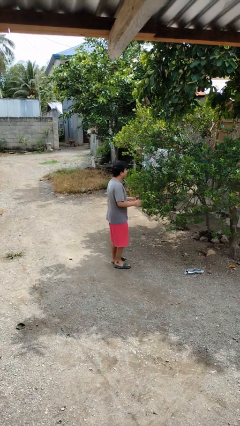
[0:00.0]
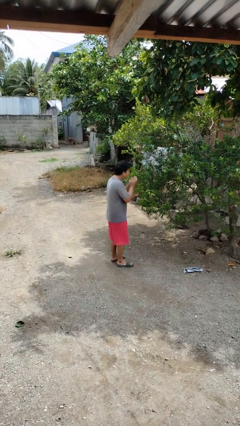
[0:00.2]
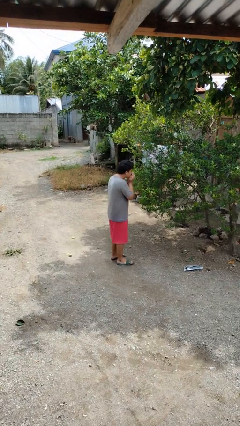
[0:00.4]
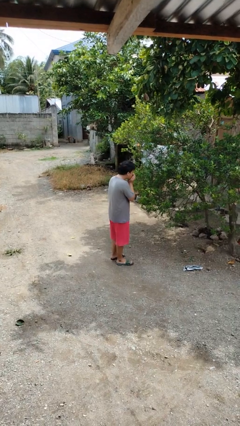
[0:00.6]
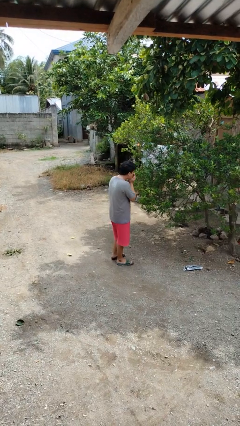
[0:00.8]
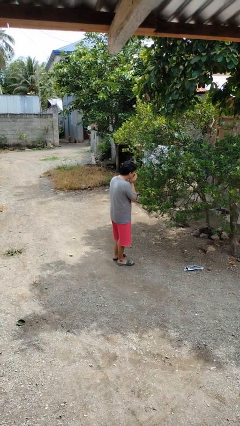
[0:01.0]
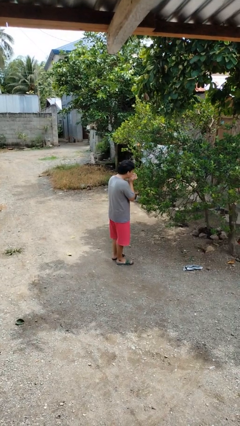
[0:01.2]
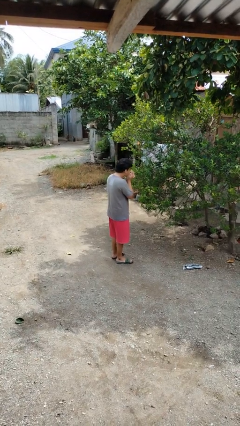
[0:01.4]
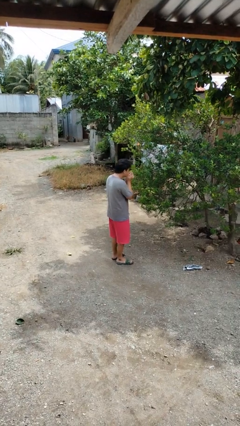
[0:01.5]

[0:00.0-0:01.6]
person blows into hands

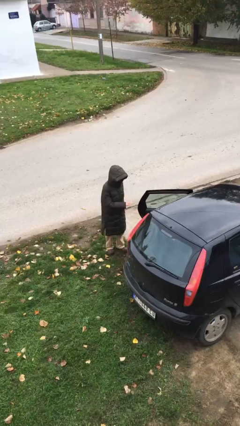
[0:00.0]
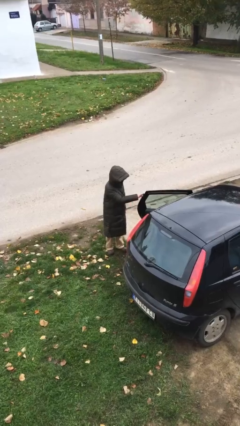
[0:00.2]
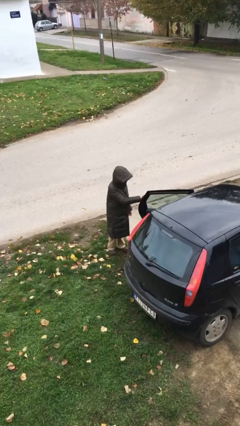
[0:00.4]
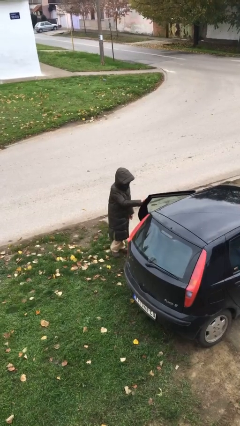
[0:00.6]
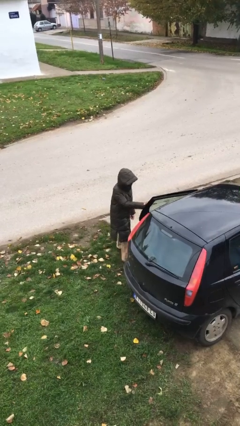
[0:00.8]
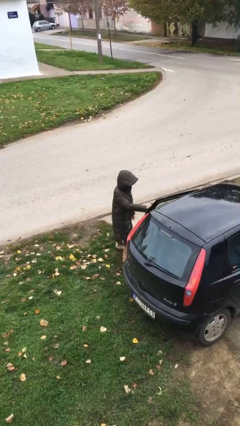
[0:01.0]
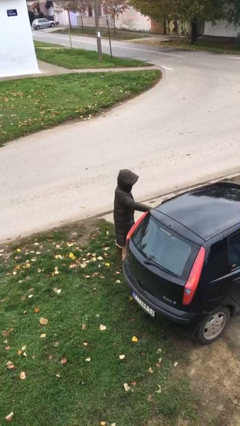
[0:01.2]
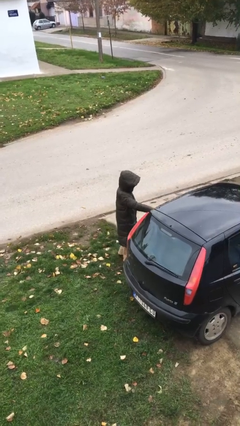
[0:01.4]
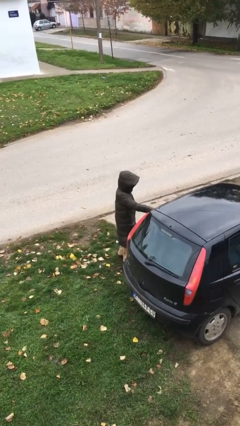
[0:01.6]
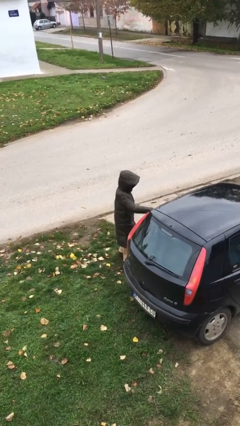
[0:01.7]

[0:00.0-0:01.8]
person closes car door

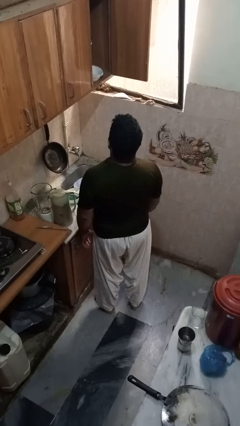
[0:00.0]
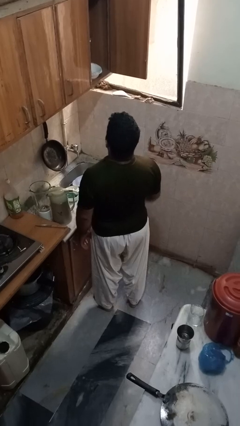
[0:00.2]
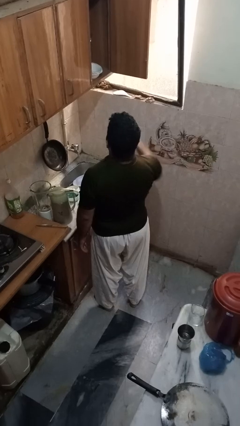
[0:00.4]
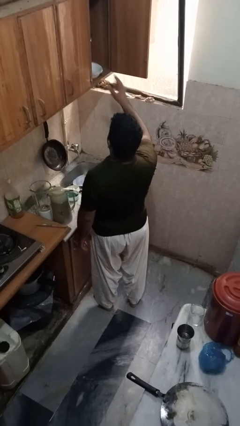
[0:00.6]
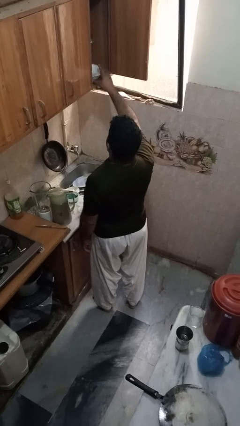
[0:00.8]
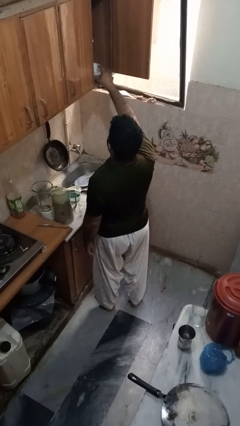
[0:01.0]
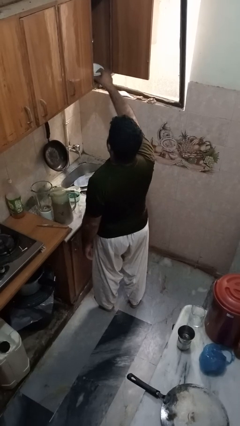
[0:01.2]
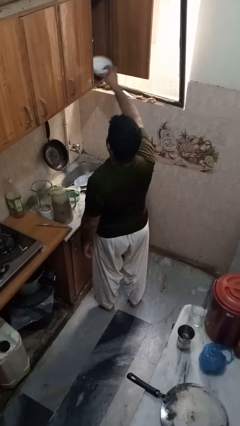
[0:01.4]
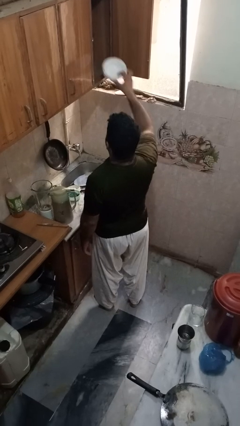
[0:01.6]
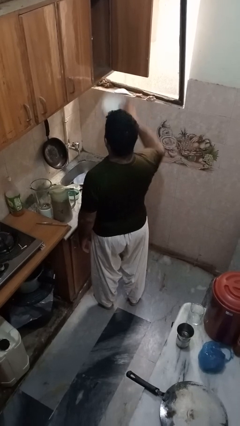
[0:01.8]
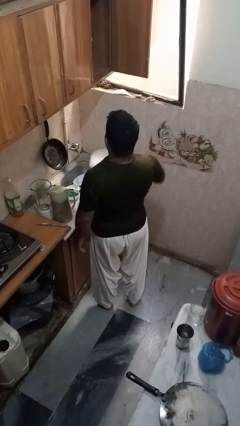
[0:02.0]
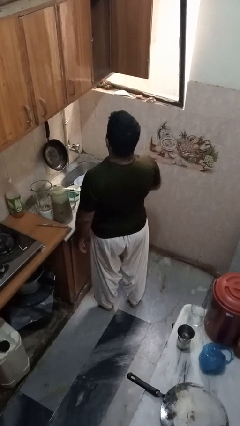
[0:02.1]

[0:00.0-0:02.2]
person takes object from cabinet

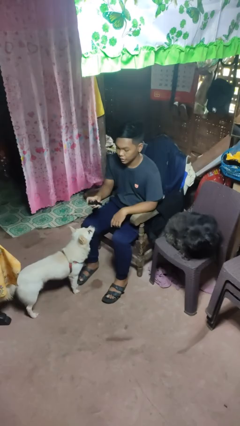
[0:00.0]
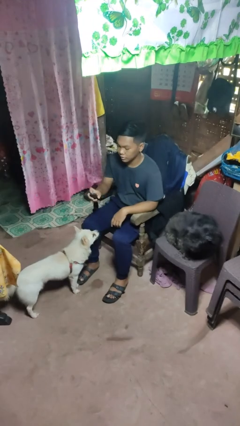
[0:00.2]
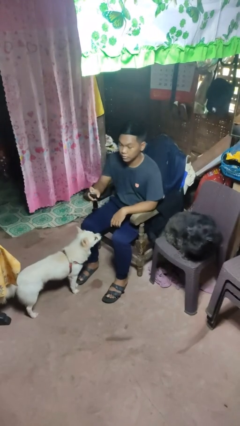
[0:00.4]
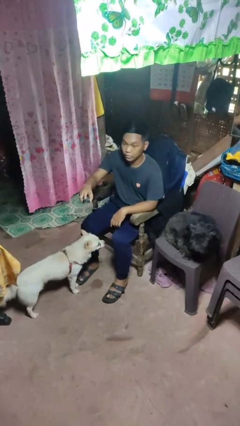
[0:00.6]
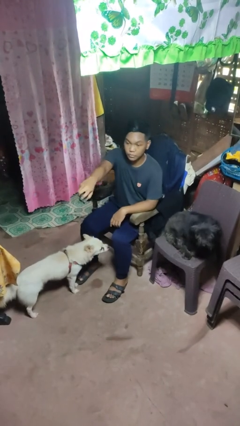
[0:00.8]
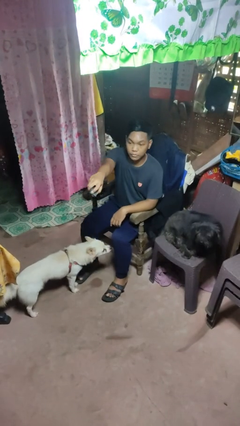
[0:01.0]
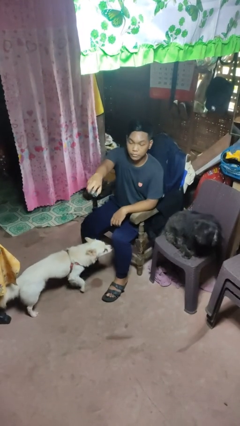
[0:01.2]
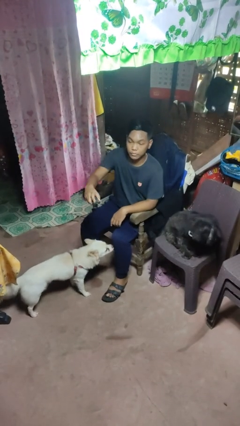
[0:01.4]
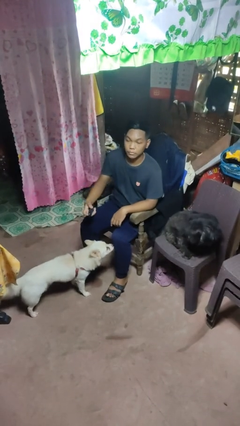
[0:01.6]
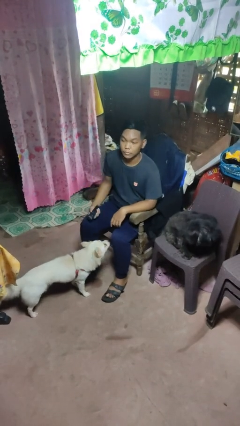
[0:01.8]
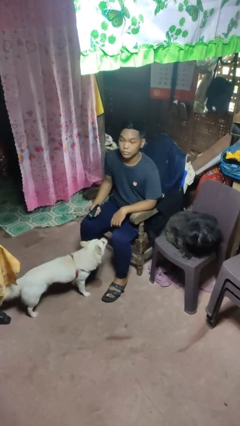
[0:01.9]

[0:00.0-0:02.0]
person uses television remote

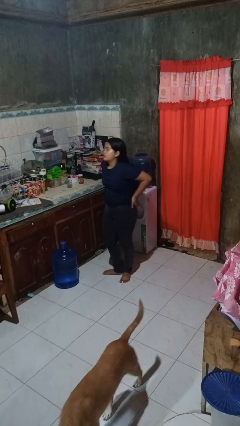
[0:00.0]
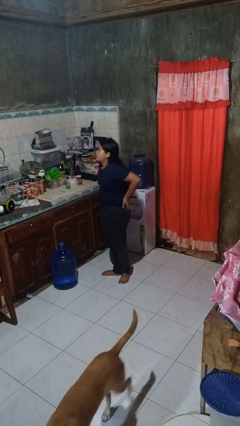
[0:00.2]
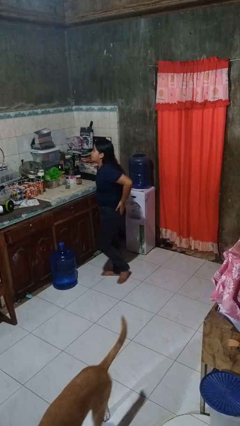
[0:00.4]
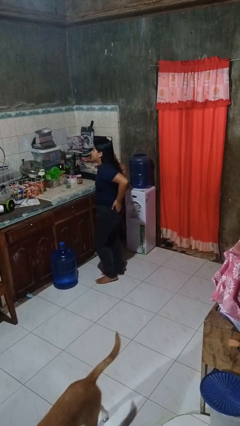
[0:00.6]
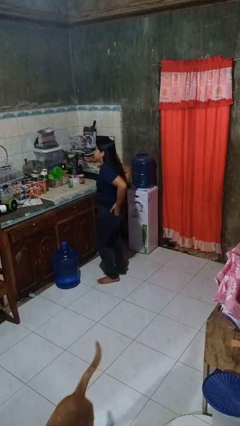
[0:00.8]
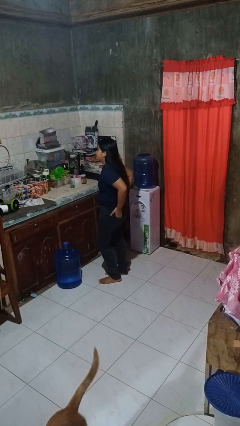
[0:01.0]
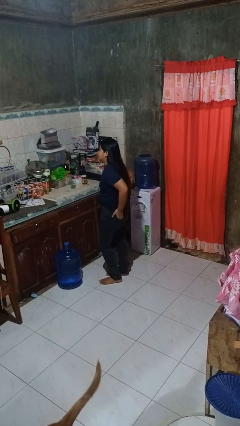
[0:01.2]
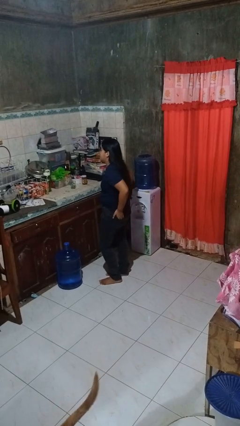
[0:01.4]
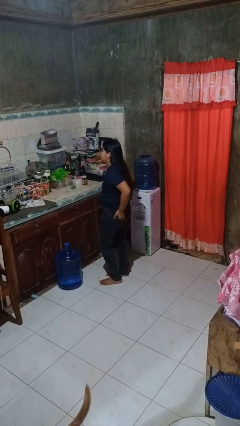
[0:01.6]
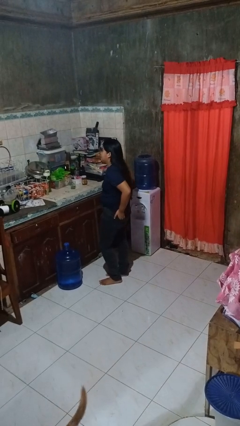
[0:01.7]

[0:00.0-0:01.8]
person puts hands in back pockets

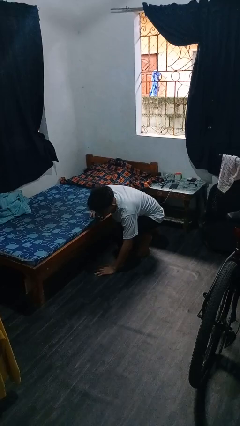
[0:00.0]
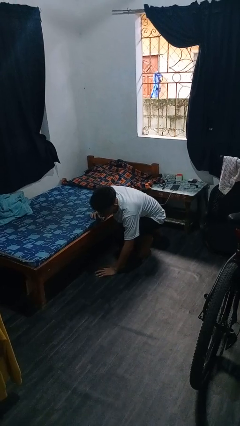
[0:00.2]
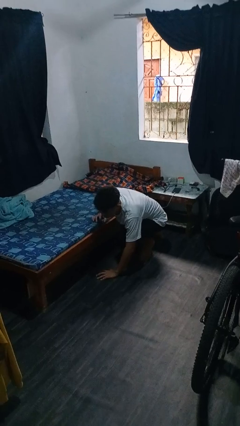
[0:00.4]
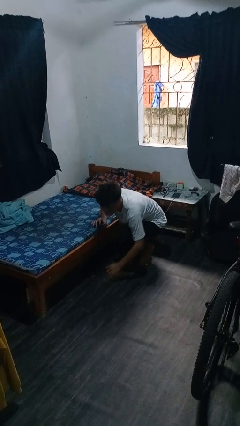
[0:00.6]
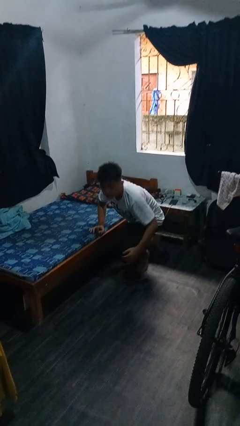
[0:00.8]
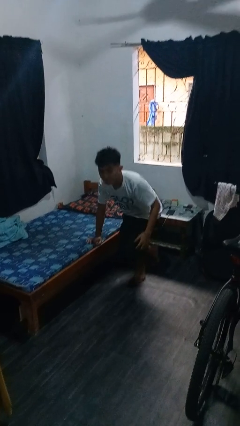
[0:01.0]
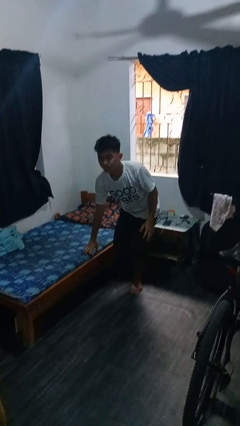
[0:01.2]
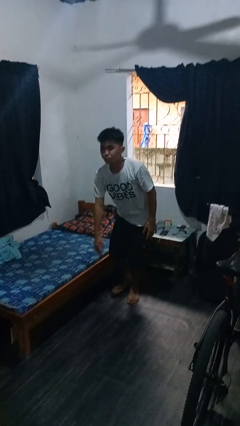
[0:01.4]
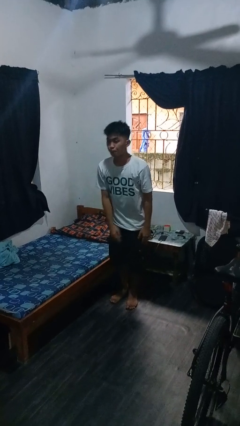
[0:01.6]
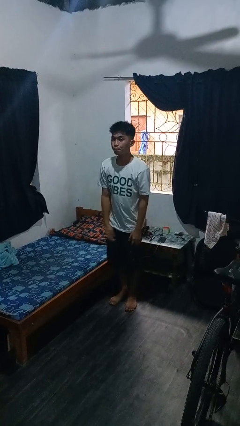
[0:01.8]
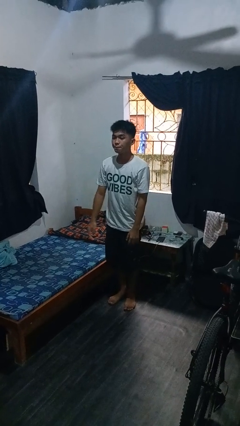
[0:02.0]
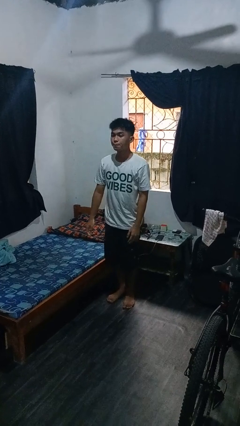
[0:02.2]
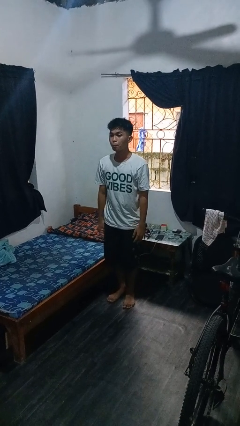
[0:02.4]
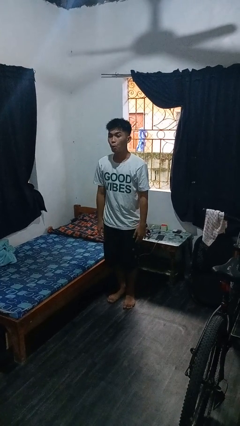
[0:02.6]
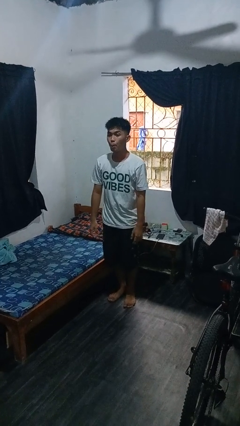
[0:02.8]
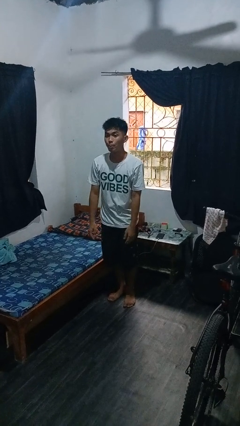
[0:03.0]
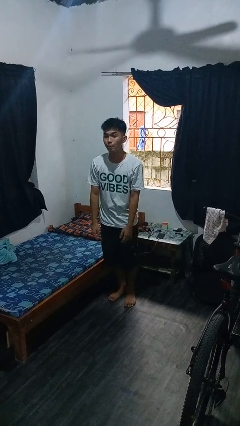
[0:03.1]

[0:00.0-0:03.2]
person stands up from floor

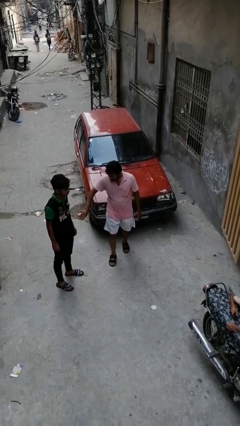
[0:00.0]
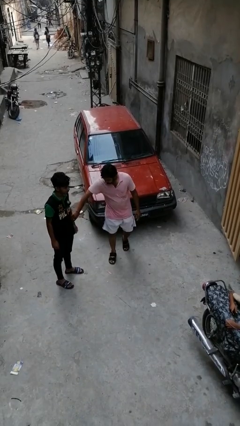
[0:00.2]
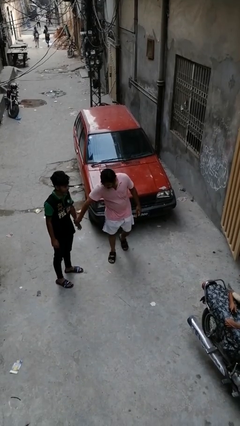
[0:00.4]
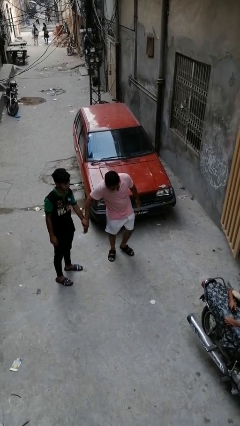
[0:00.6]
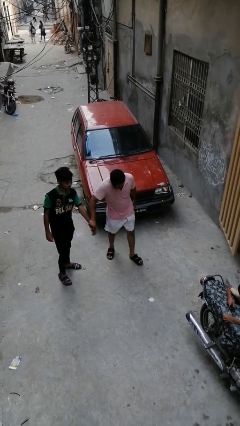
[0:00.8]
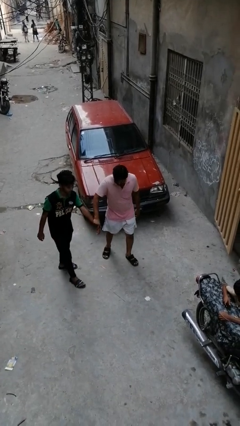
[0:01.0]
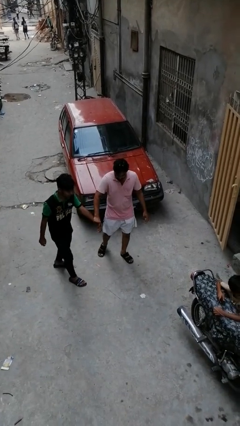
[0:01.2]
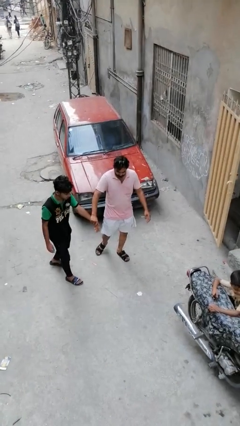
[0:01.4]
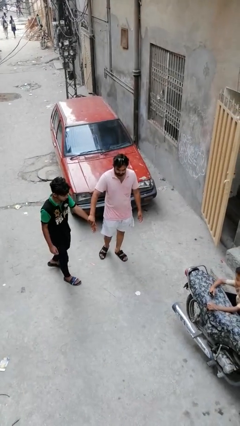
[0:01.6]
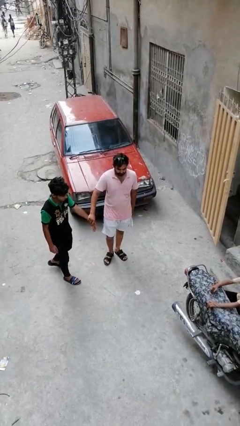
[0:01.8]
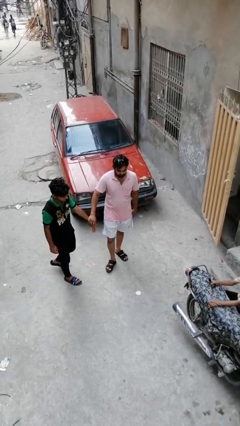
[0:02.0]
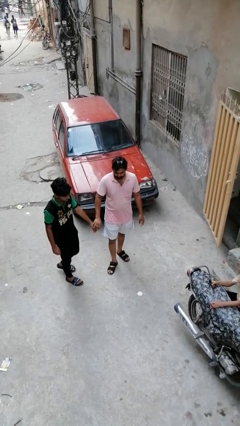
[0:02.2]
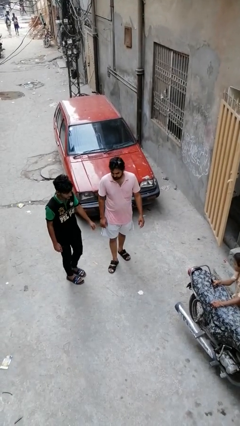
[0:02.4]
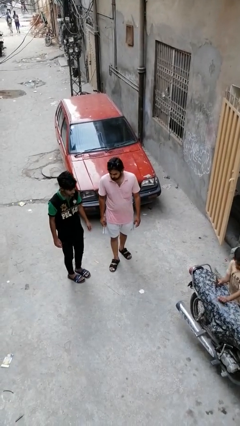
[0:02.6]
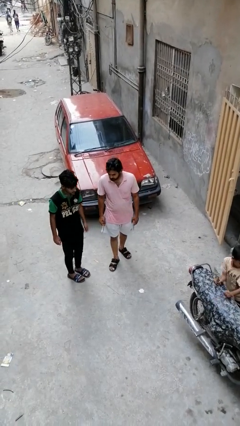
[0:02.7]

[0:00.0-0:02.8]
person grabs person by forearm

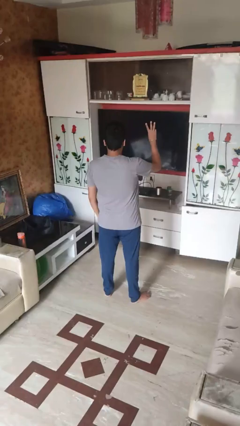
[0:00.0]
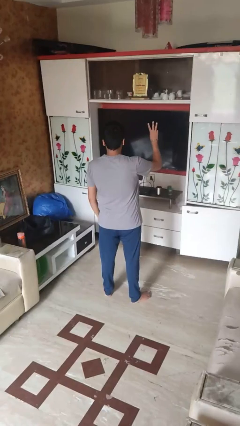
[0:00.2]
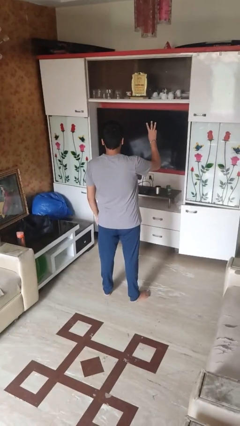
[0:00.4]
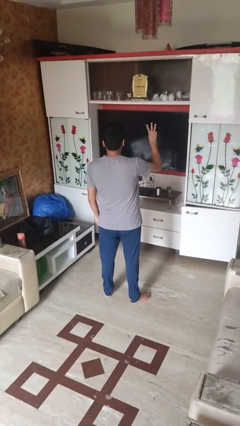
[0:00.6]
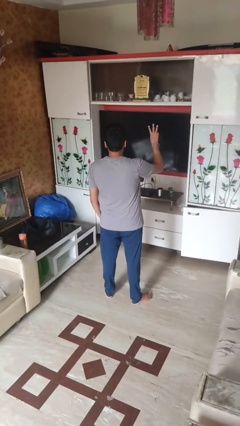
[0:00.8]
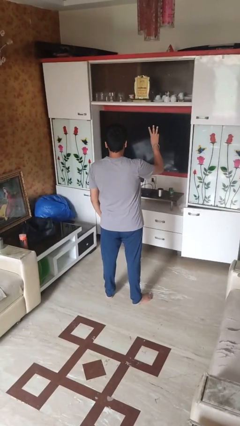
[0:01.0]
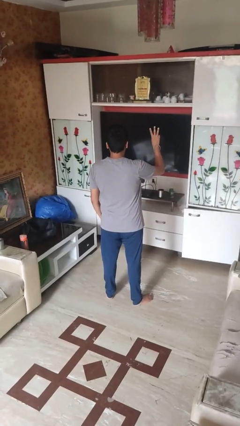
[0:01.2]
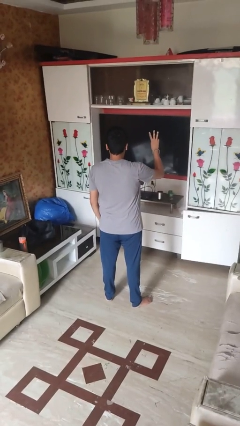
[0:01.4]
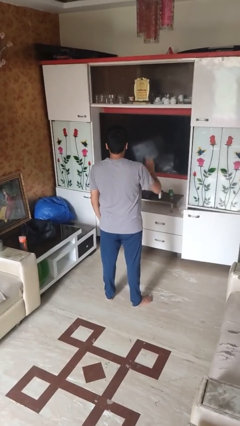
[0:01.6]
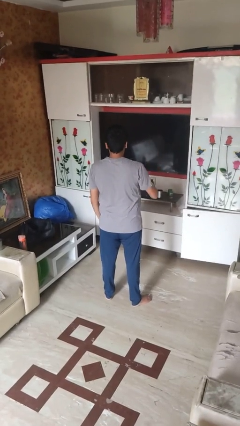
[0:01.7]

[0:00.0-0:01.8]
person gestures number three
